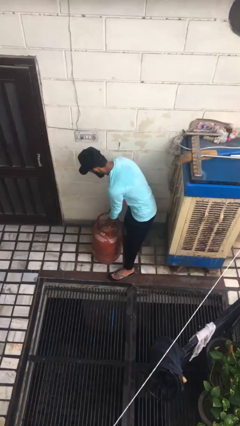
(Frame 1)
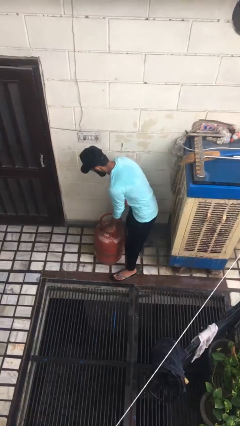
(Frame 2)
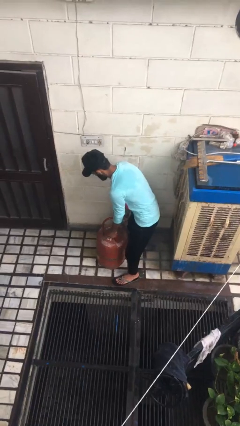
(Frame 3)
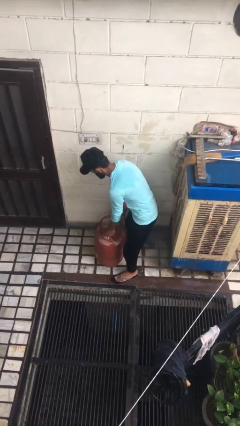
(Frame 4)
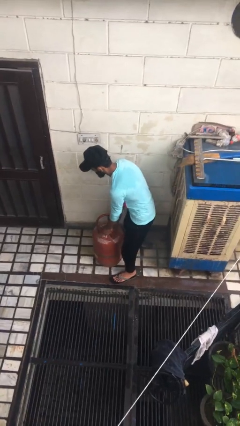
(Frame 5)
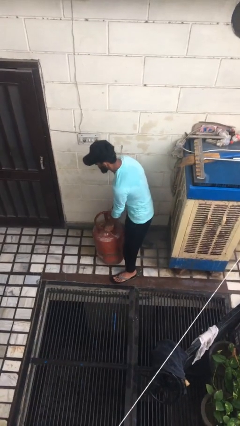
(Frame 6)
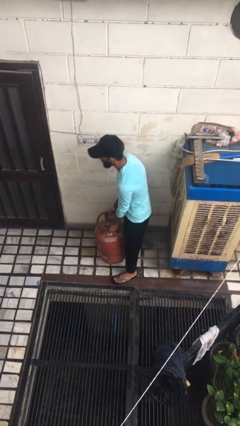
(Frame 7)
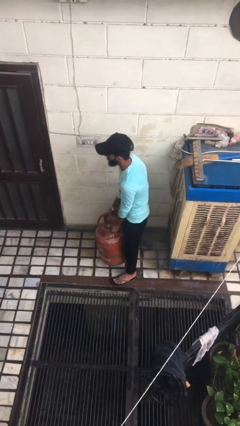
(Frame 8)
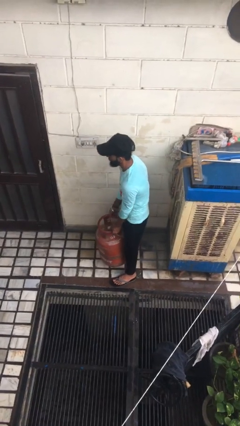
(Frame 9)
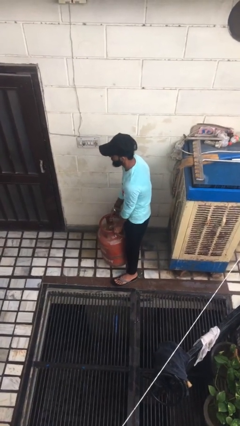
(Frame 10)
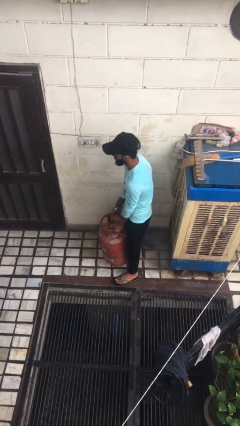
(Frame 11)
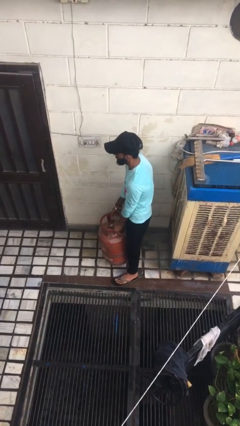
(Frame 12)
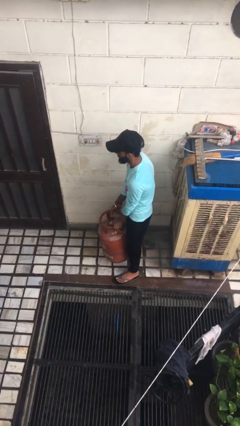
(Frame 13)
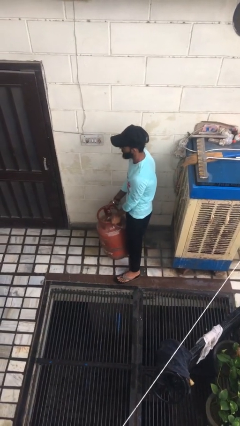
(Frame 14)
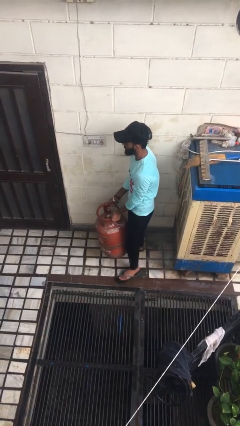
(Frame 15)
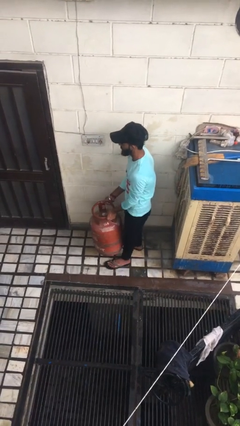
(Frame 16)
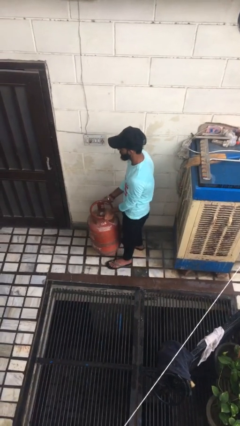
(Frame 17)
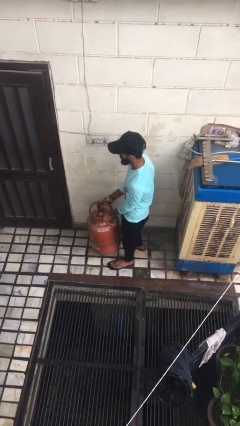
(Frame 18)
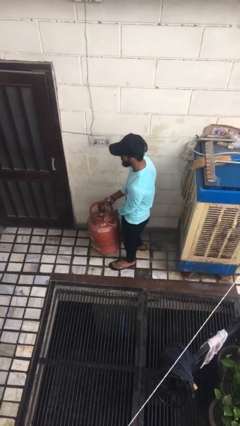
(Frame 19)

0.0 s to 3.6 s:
person picks up object from floor

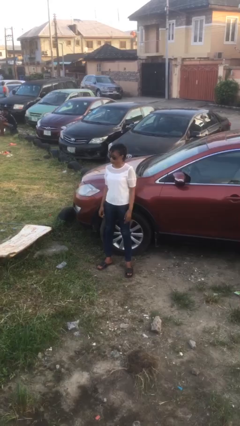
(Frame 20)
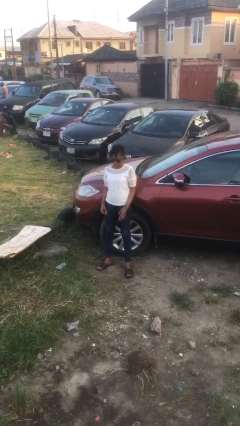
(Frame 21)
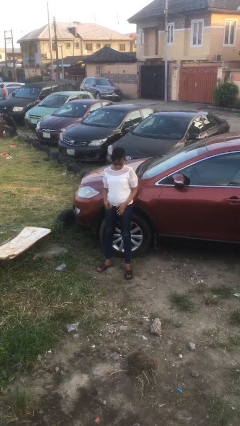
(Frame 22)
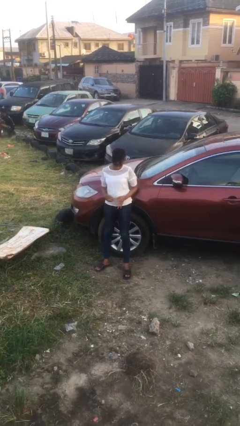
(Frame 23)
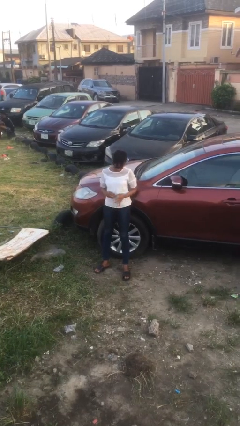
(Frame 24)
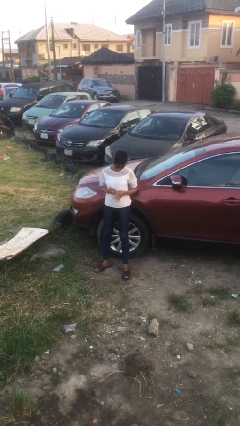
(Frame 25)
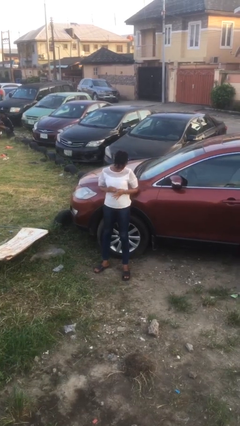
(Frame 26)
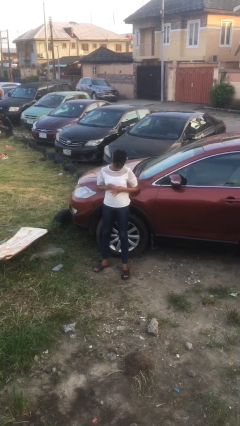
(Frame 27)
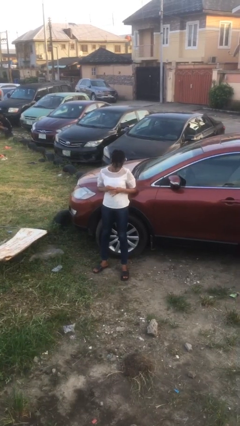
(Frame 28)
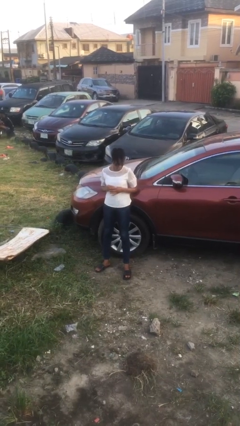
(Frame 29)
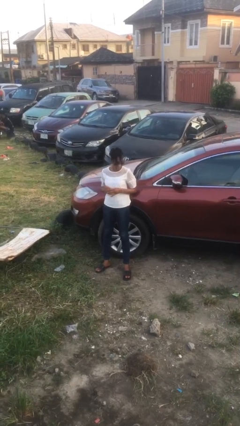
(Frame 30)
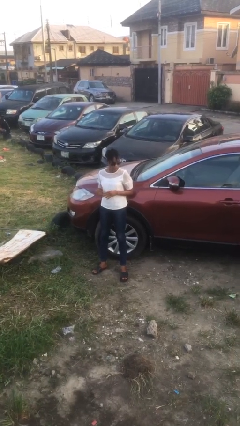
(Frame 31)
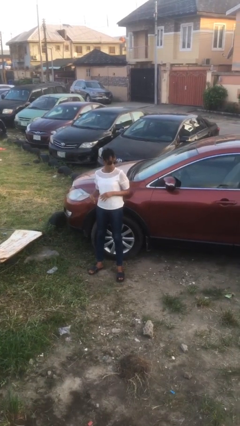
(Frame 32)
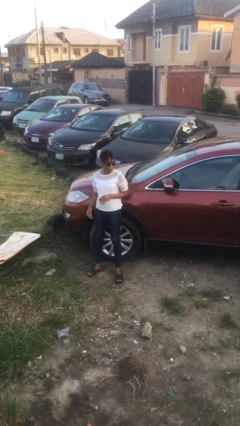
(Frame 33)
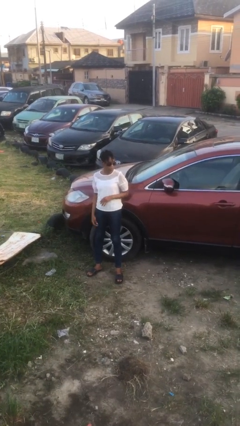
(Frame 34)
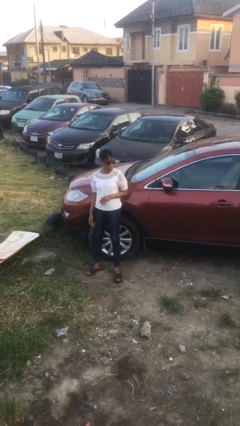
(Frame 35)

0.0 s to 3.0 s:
person puts on ring

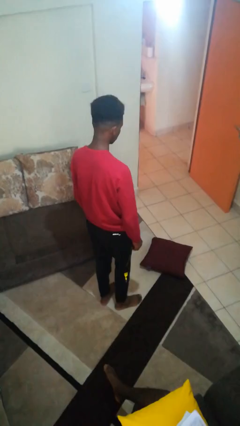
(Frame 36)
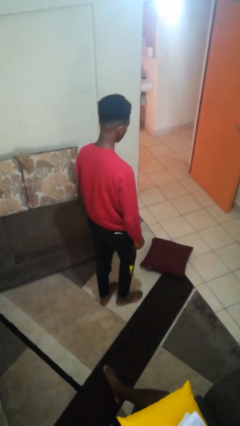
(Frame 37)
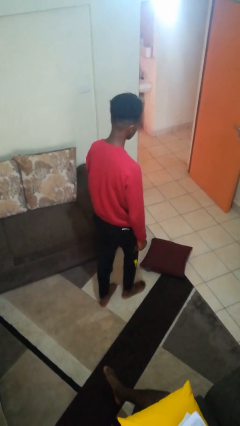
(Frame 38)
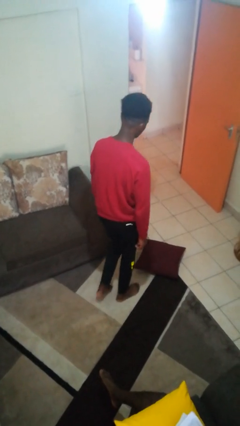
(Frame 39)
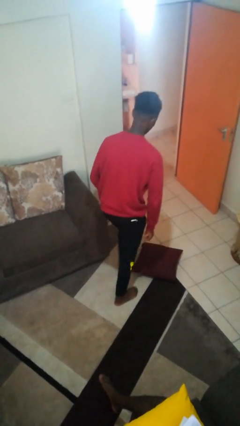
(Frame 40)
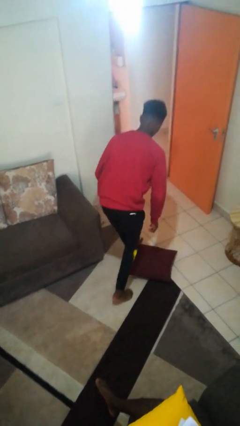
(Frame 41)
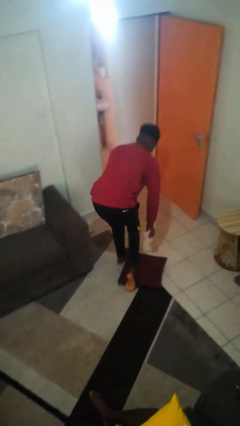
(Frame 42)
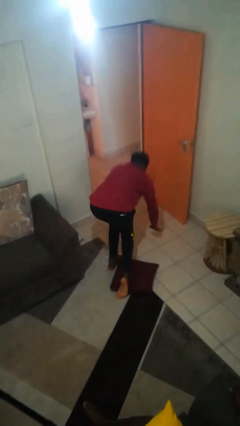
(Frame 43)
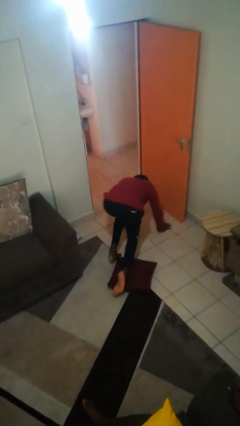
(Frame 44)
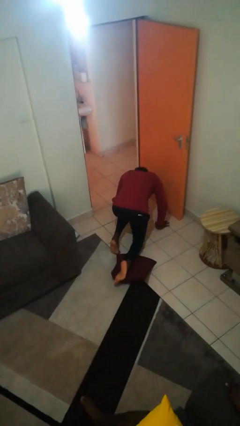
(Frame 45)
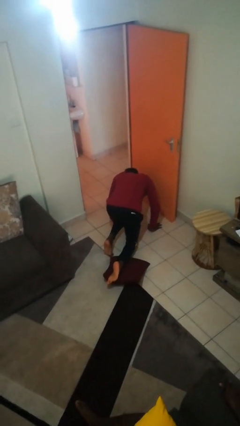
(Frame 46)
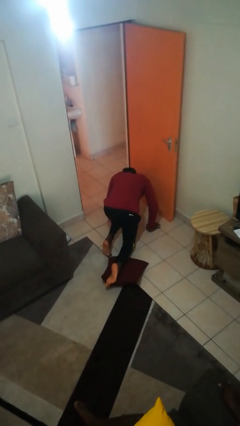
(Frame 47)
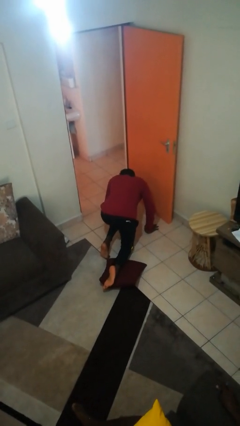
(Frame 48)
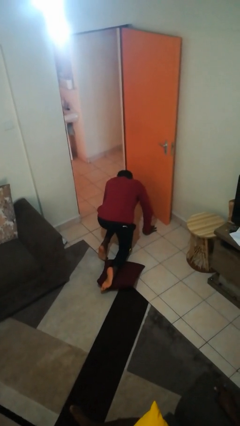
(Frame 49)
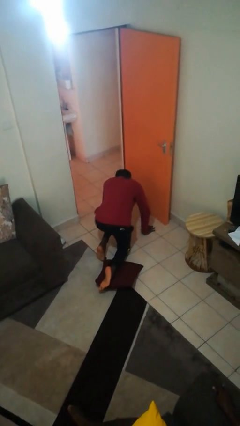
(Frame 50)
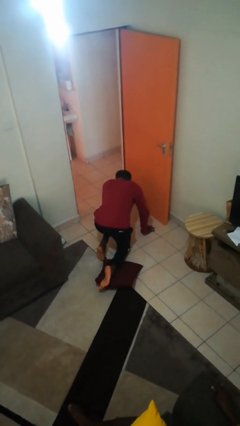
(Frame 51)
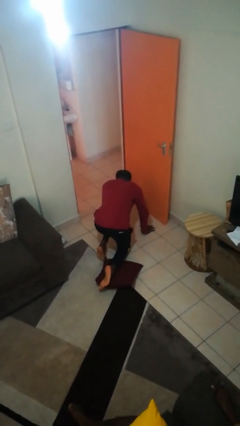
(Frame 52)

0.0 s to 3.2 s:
person trips on object on floor

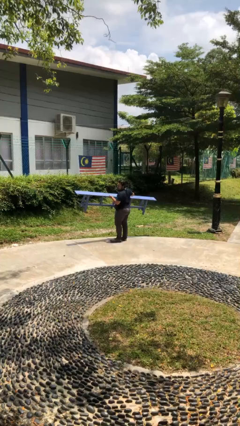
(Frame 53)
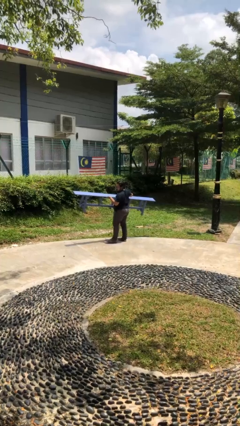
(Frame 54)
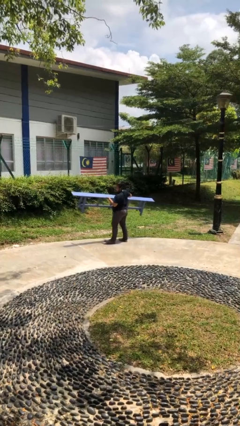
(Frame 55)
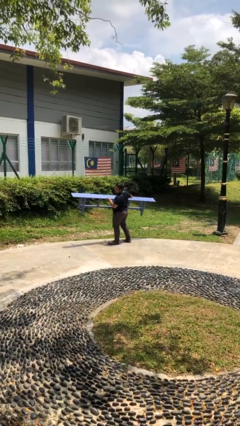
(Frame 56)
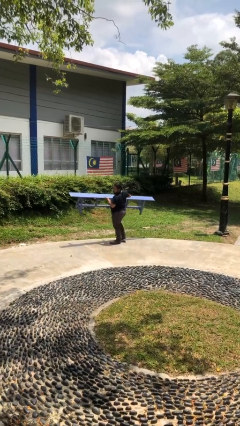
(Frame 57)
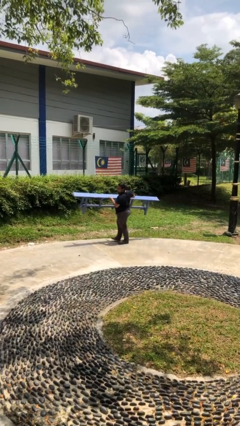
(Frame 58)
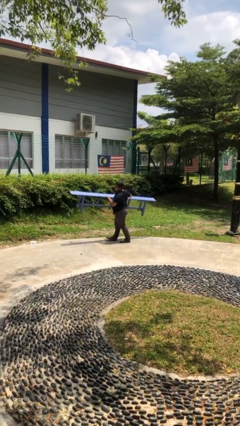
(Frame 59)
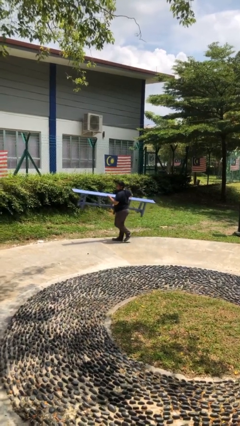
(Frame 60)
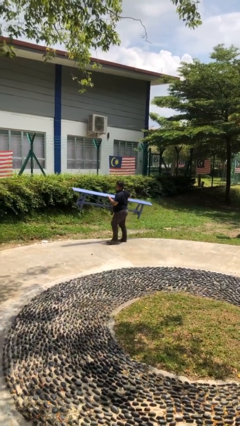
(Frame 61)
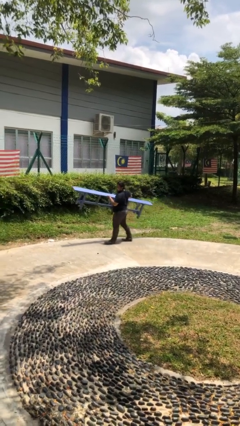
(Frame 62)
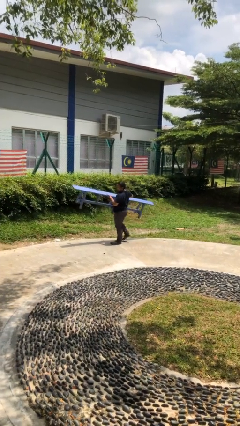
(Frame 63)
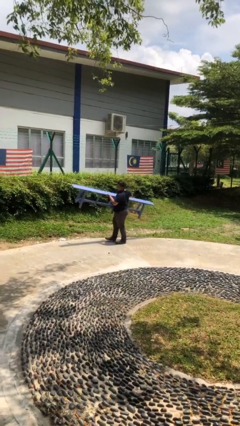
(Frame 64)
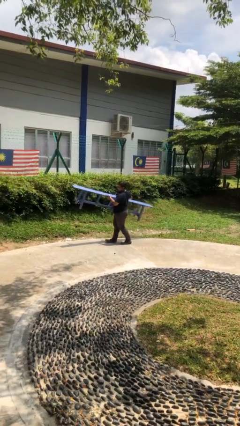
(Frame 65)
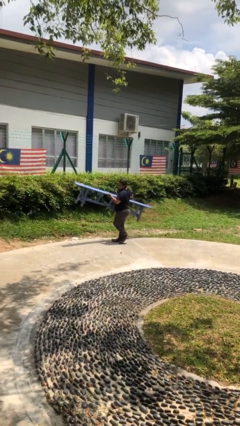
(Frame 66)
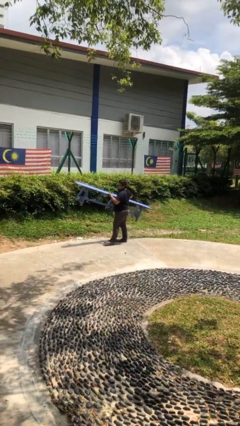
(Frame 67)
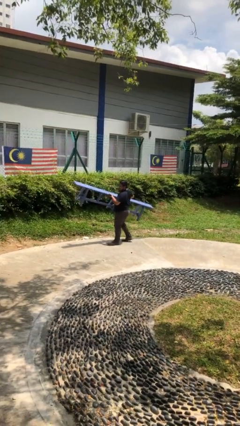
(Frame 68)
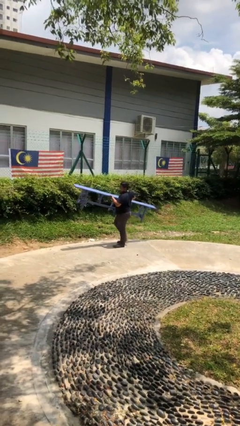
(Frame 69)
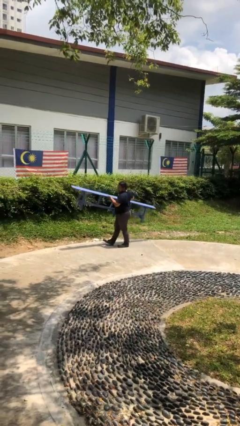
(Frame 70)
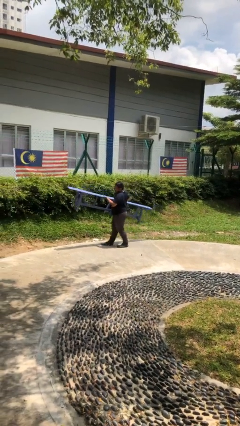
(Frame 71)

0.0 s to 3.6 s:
person carries heavy object

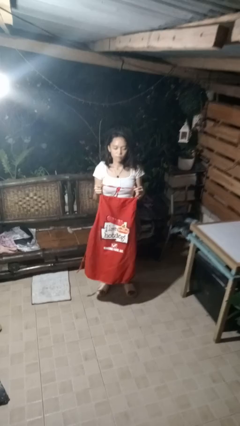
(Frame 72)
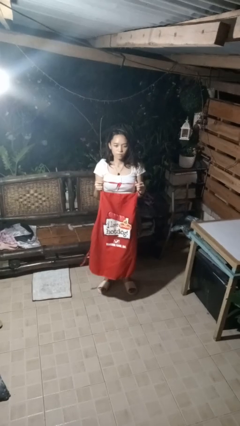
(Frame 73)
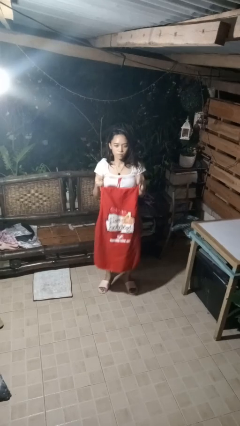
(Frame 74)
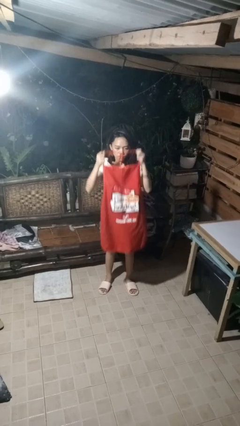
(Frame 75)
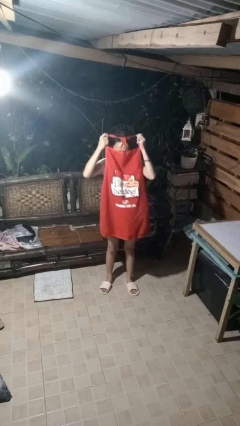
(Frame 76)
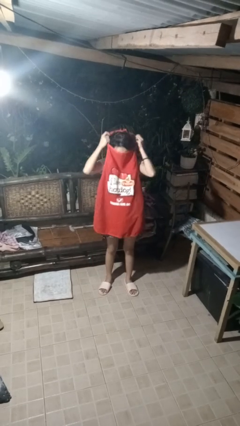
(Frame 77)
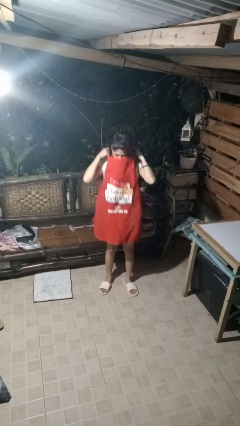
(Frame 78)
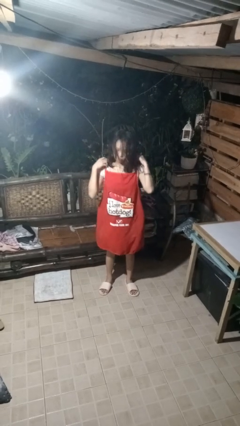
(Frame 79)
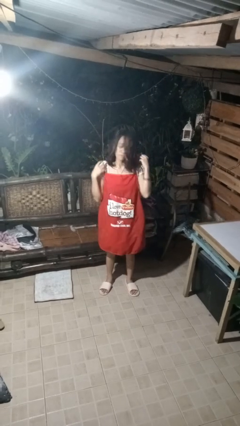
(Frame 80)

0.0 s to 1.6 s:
person puts on apron

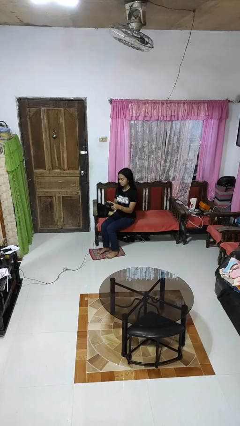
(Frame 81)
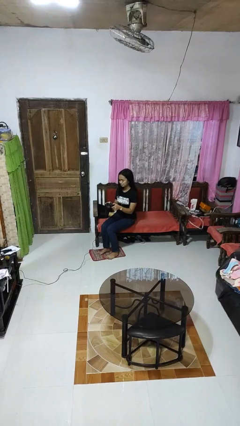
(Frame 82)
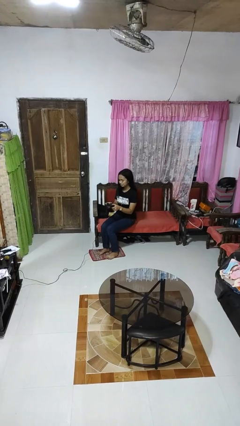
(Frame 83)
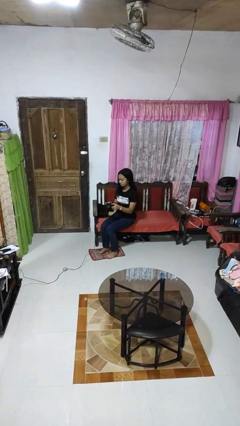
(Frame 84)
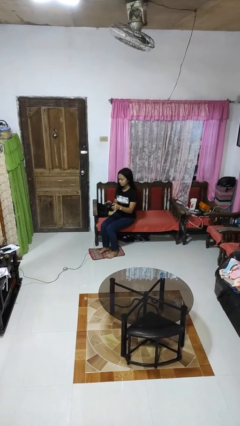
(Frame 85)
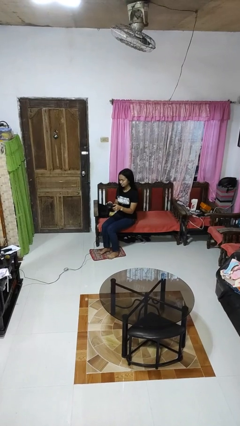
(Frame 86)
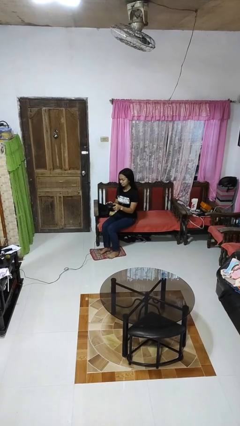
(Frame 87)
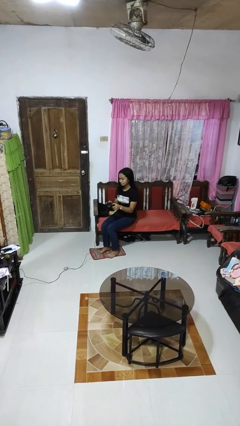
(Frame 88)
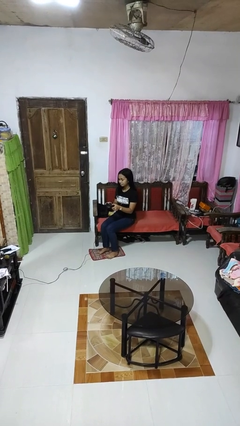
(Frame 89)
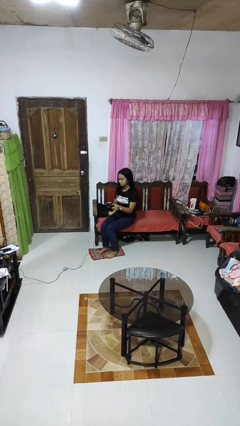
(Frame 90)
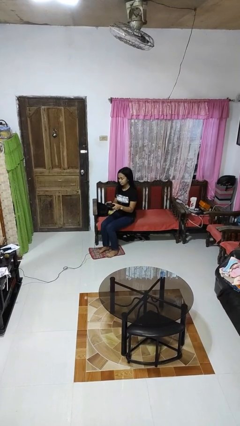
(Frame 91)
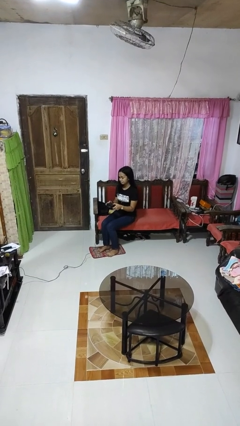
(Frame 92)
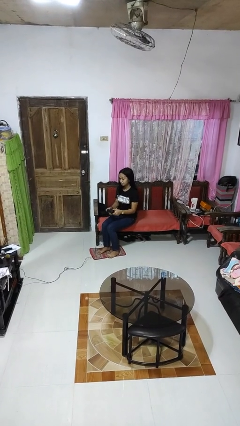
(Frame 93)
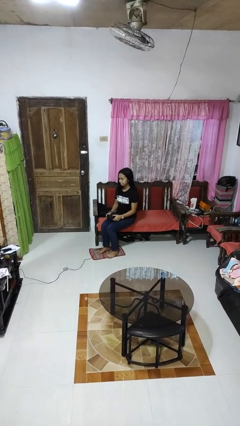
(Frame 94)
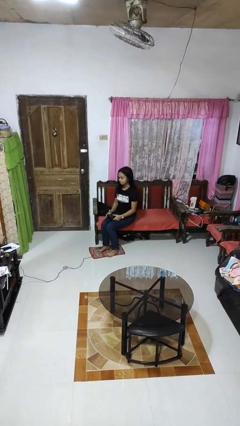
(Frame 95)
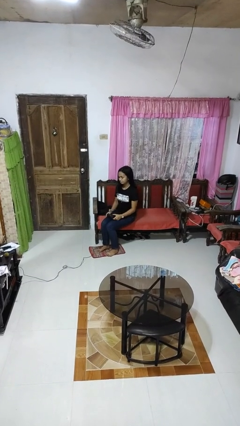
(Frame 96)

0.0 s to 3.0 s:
person interacts with handheld game
